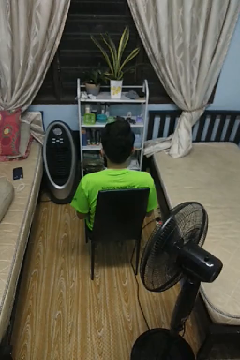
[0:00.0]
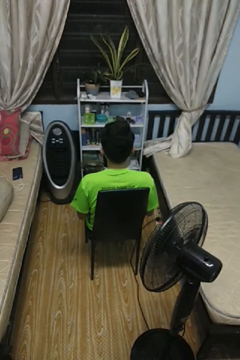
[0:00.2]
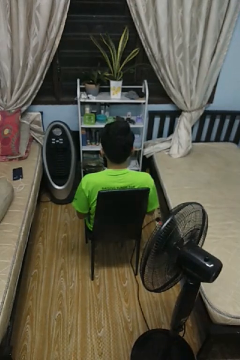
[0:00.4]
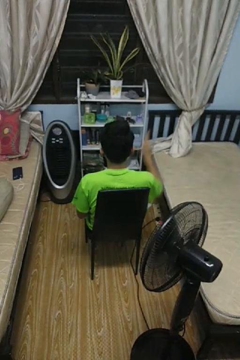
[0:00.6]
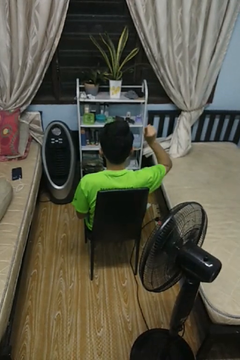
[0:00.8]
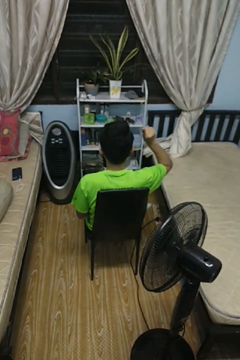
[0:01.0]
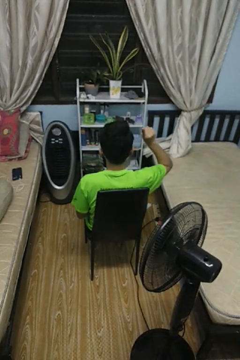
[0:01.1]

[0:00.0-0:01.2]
person gestures number one

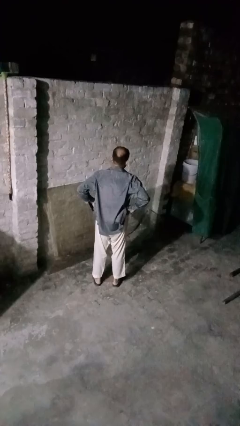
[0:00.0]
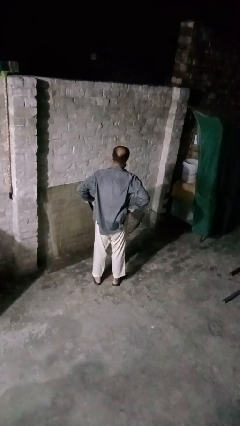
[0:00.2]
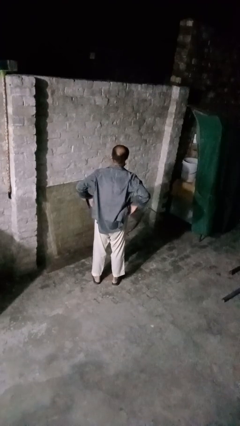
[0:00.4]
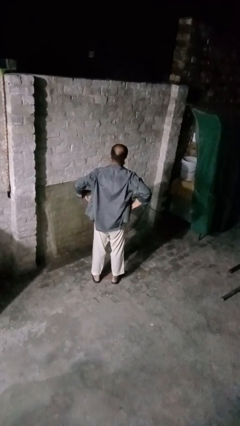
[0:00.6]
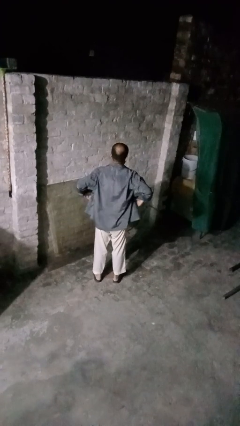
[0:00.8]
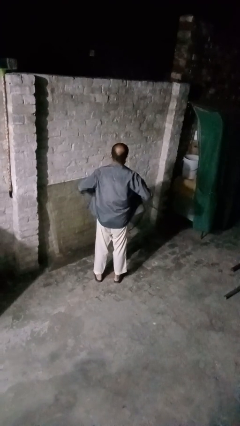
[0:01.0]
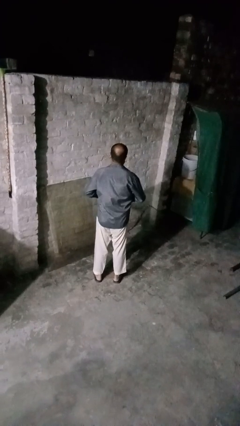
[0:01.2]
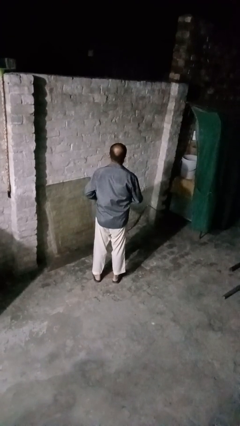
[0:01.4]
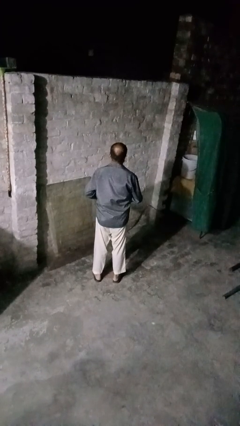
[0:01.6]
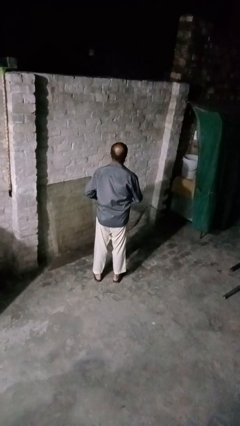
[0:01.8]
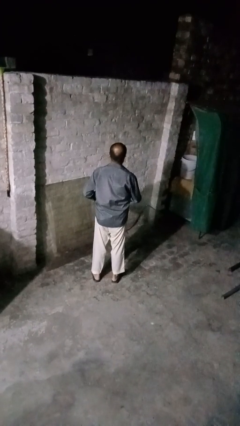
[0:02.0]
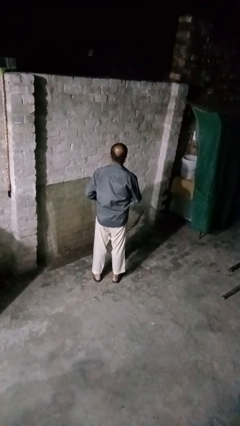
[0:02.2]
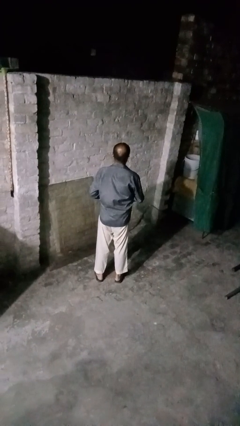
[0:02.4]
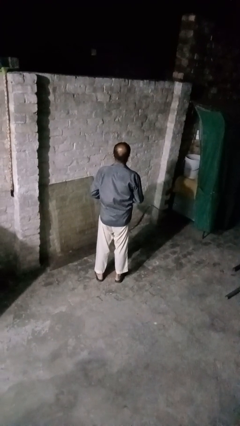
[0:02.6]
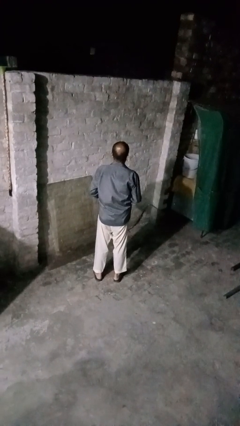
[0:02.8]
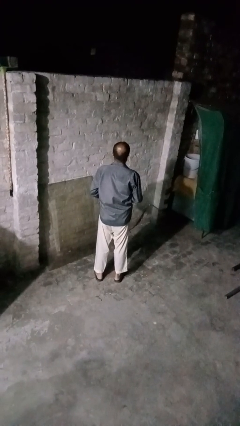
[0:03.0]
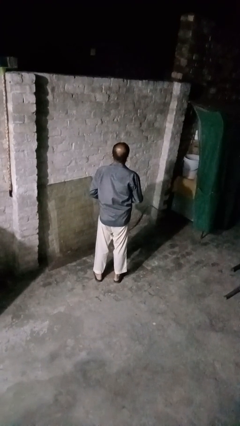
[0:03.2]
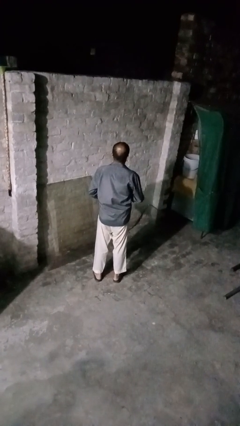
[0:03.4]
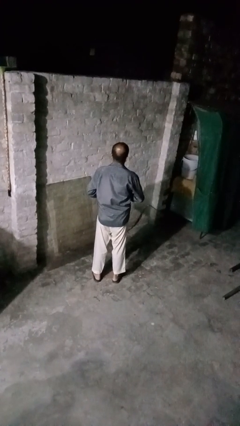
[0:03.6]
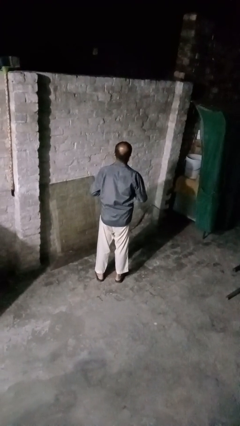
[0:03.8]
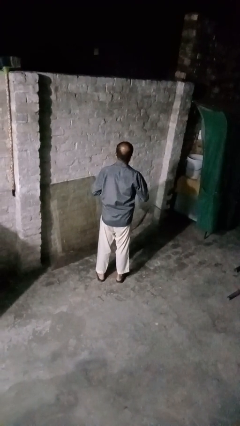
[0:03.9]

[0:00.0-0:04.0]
person buttons shirt

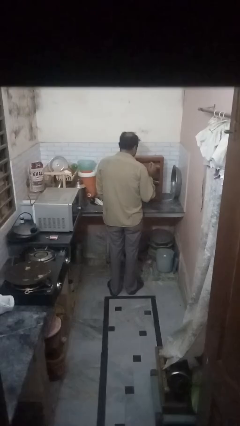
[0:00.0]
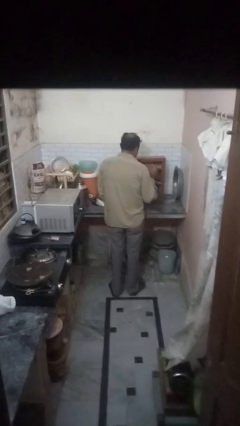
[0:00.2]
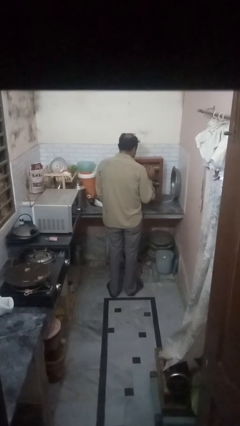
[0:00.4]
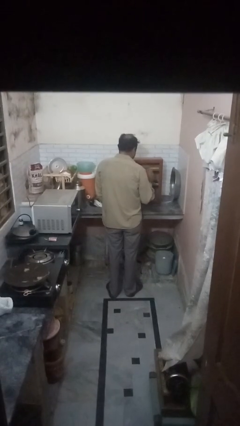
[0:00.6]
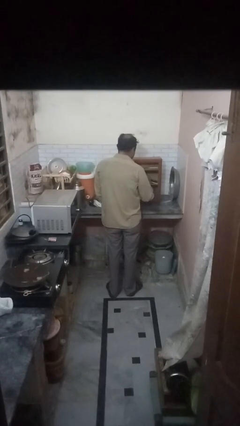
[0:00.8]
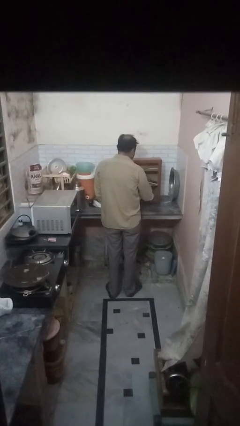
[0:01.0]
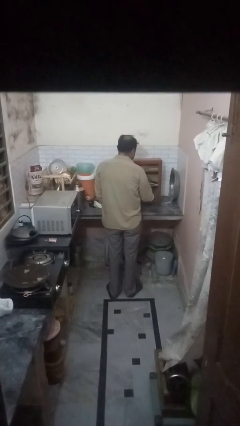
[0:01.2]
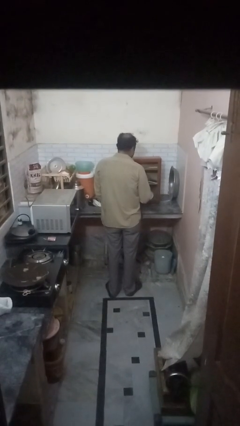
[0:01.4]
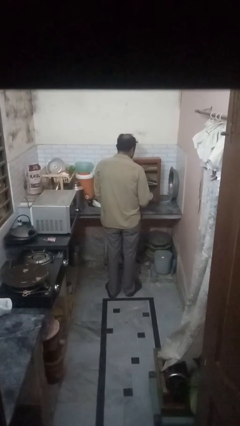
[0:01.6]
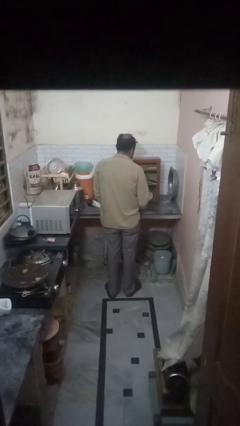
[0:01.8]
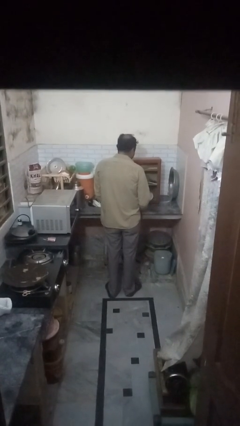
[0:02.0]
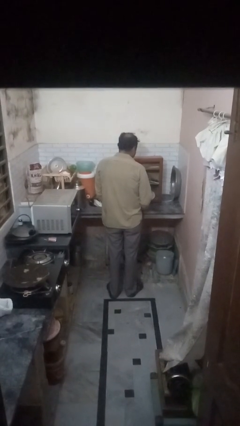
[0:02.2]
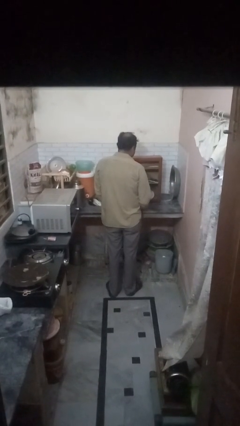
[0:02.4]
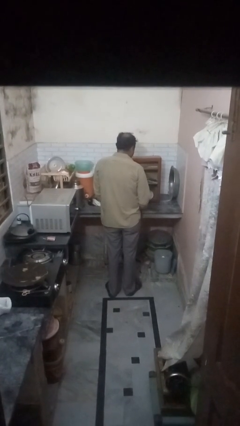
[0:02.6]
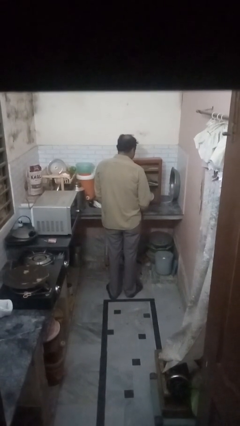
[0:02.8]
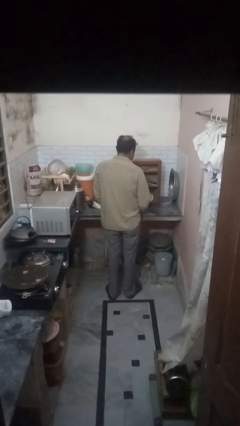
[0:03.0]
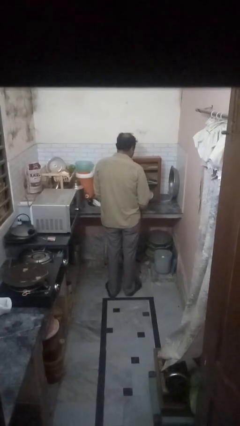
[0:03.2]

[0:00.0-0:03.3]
person takes object from cabinet

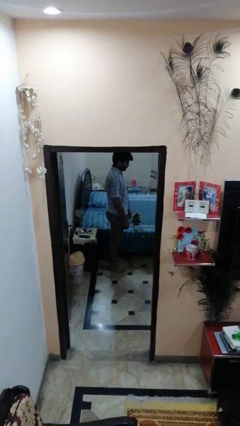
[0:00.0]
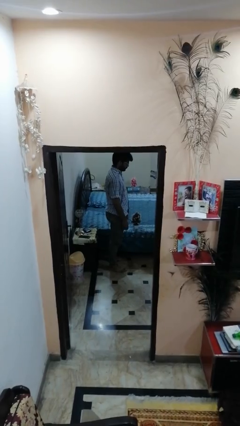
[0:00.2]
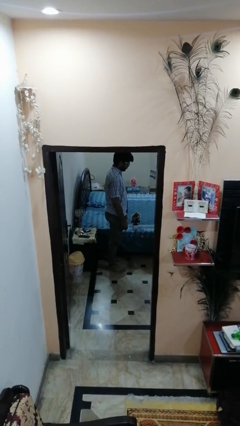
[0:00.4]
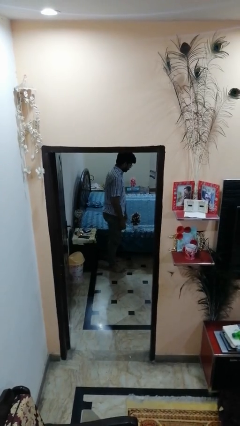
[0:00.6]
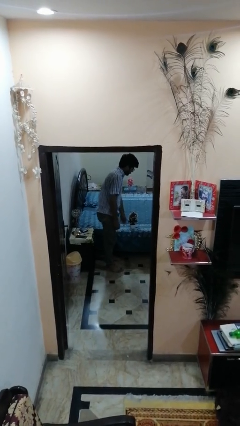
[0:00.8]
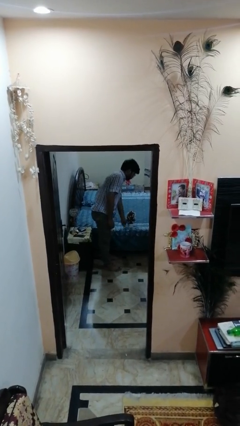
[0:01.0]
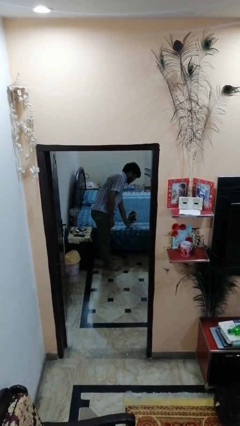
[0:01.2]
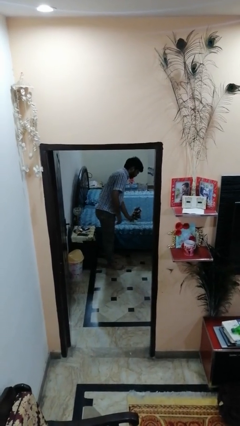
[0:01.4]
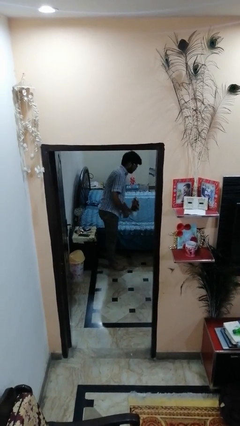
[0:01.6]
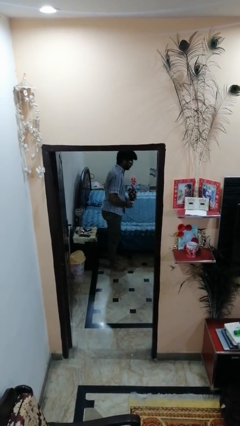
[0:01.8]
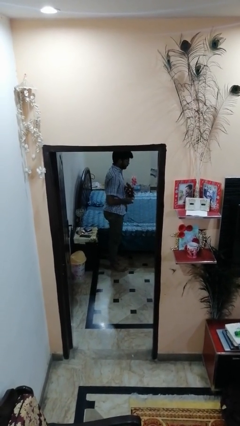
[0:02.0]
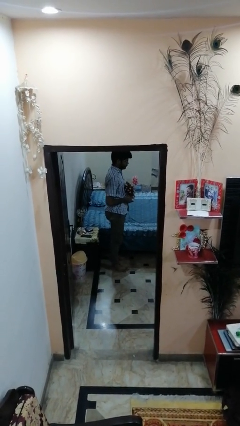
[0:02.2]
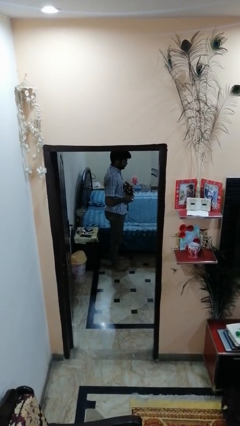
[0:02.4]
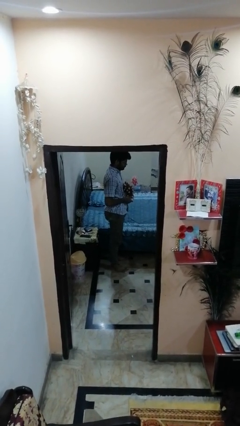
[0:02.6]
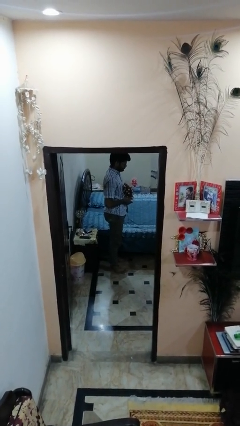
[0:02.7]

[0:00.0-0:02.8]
person picks up object from bed

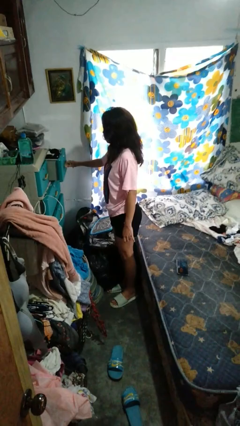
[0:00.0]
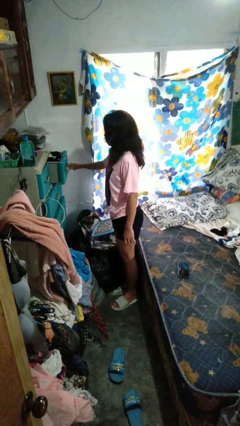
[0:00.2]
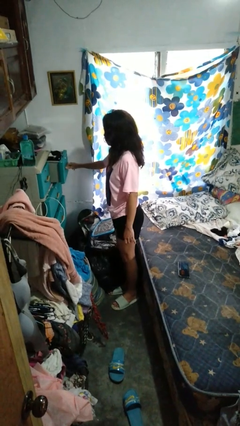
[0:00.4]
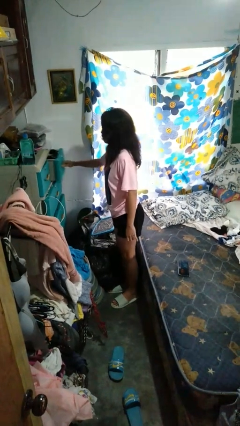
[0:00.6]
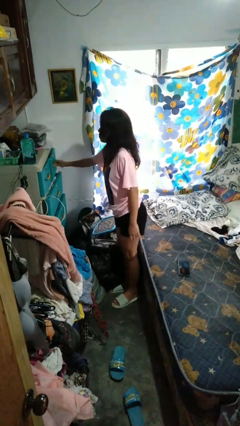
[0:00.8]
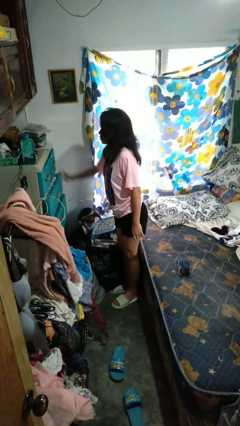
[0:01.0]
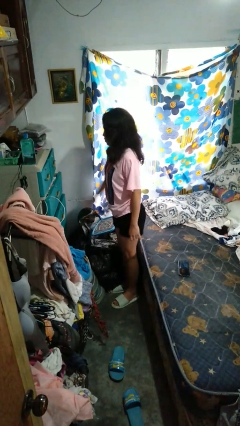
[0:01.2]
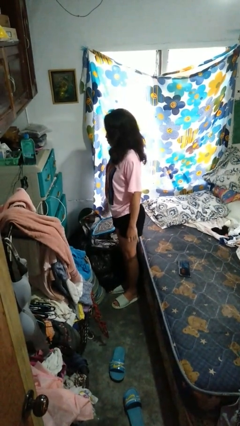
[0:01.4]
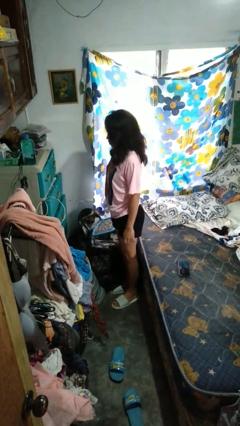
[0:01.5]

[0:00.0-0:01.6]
person closes dresser drawer

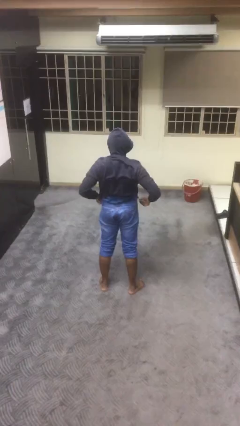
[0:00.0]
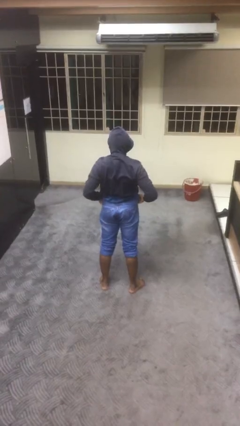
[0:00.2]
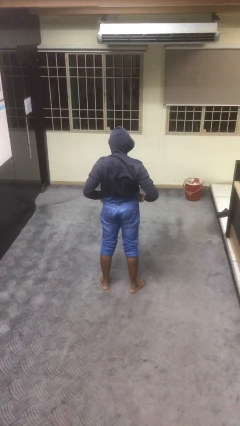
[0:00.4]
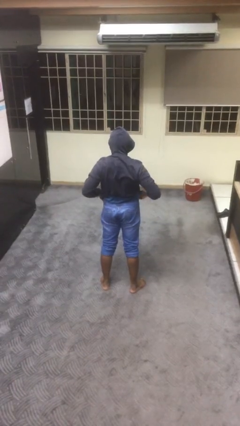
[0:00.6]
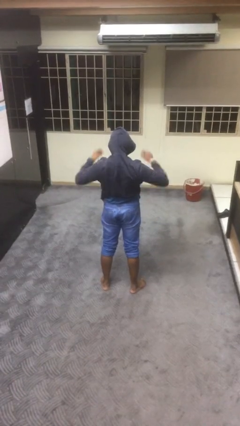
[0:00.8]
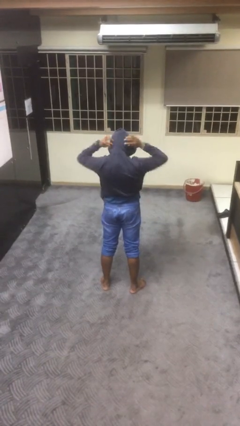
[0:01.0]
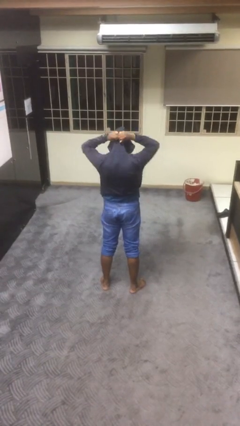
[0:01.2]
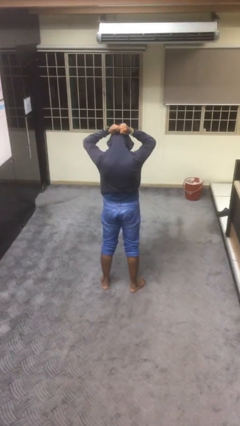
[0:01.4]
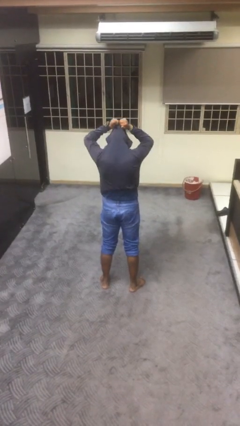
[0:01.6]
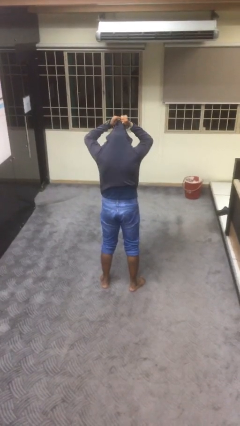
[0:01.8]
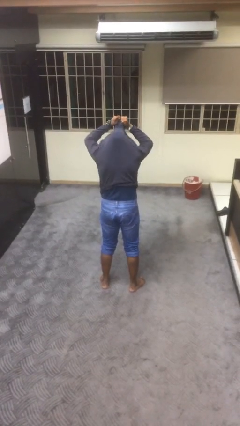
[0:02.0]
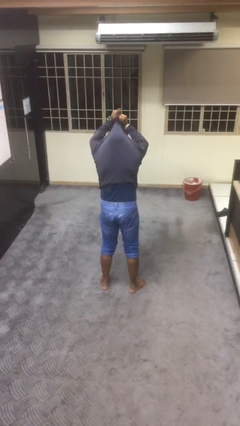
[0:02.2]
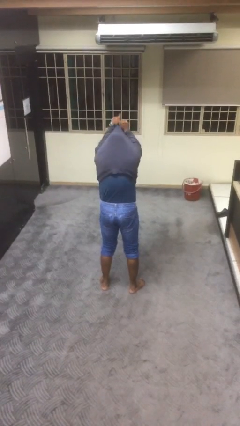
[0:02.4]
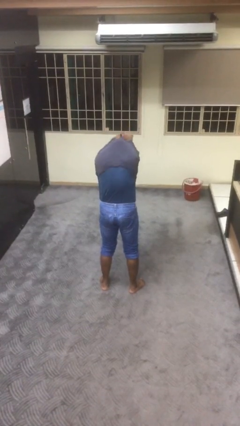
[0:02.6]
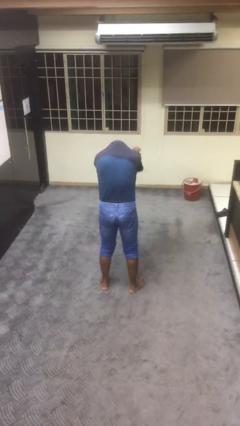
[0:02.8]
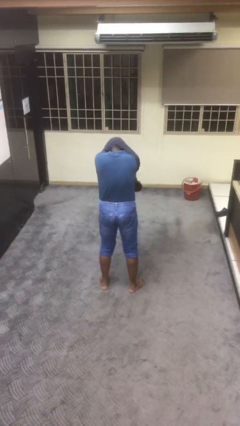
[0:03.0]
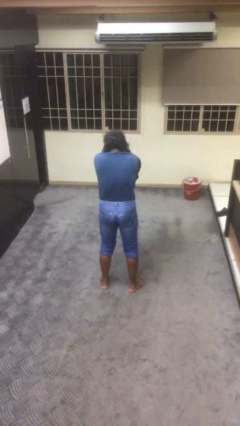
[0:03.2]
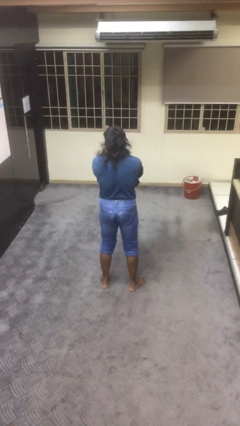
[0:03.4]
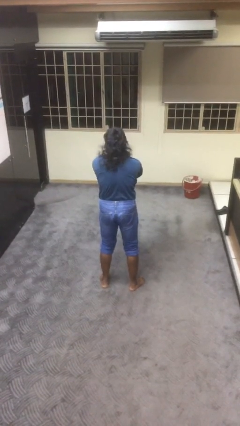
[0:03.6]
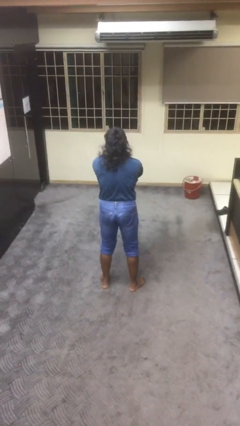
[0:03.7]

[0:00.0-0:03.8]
person takes off hoodie

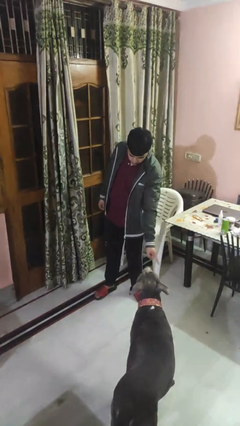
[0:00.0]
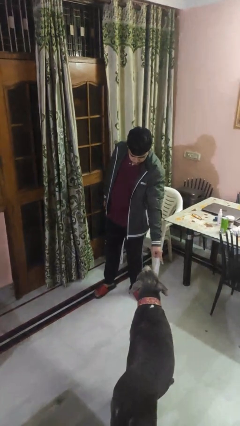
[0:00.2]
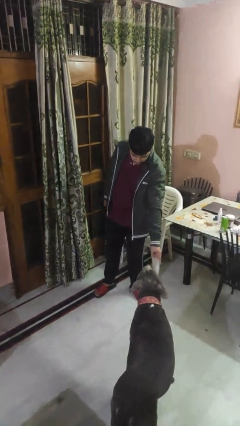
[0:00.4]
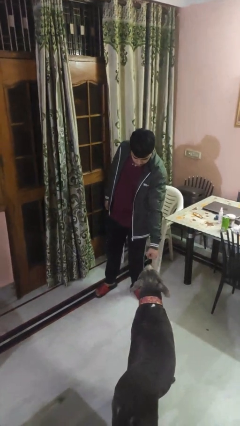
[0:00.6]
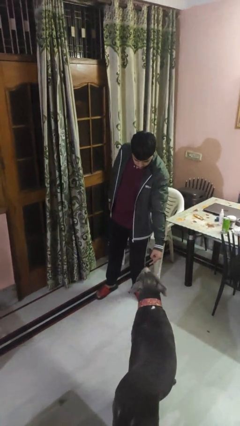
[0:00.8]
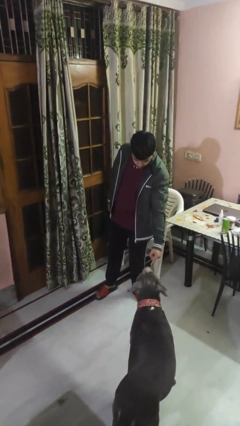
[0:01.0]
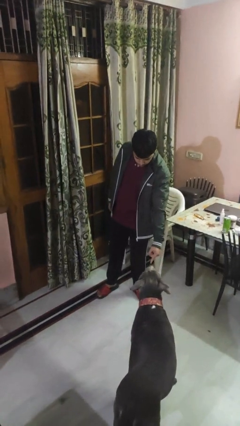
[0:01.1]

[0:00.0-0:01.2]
person points to dog
